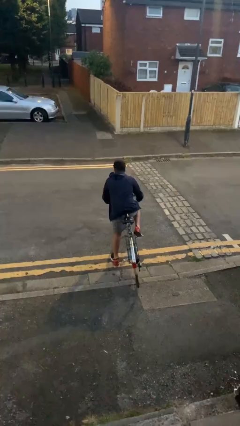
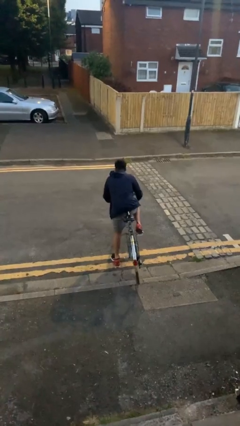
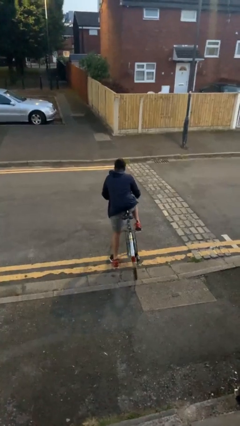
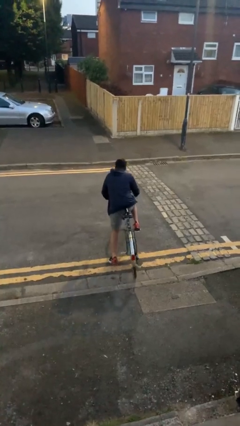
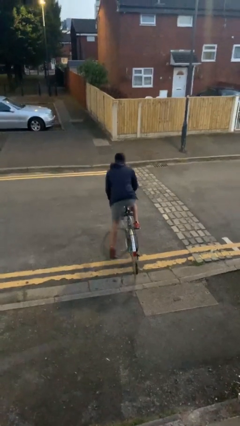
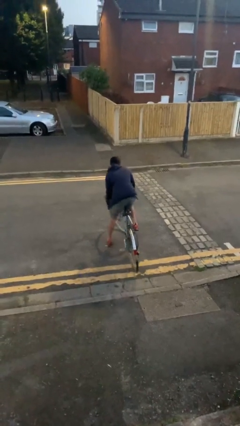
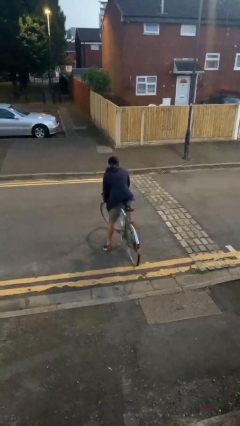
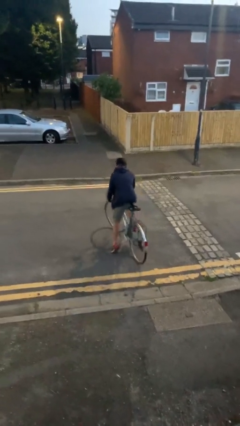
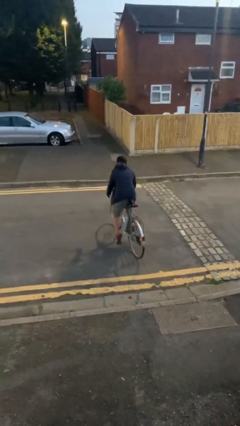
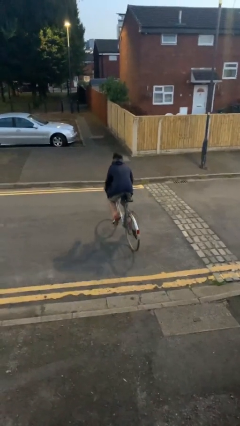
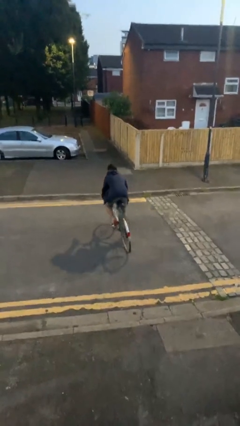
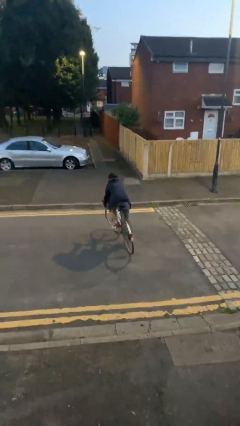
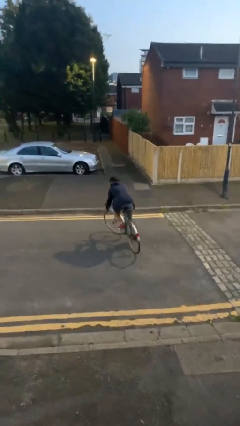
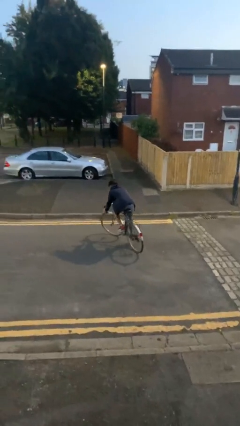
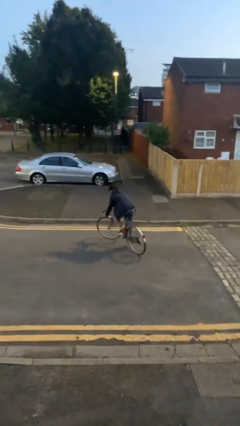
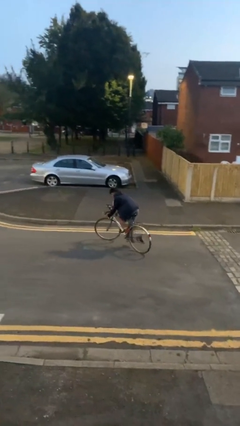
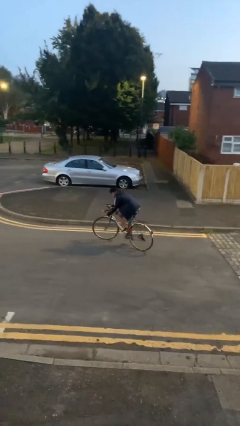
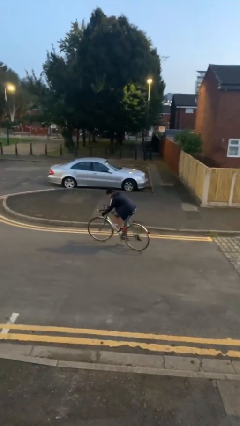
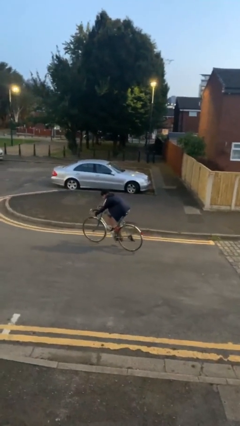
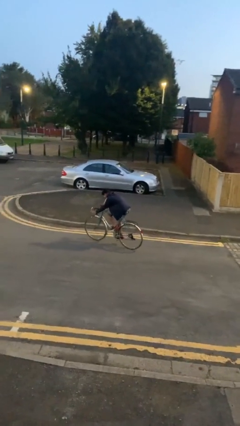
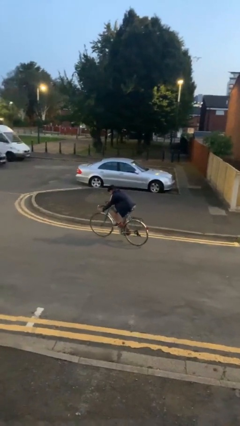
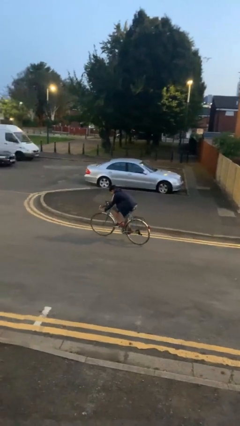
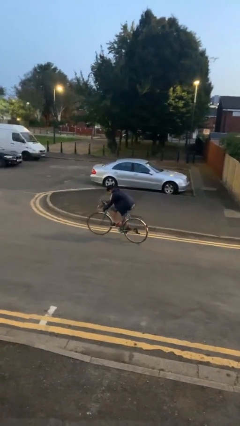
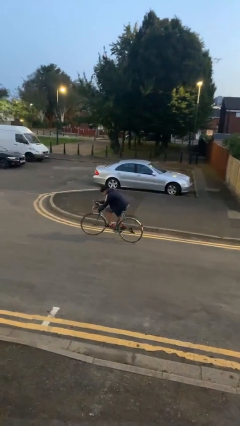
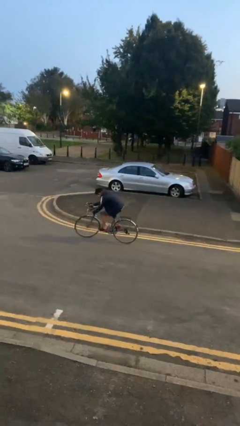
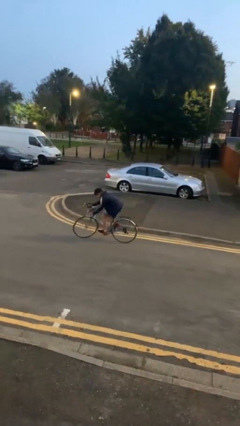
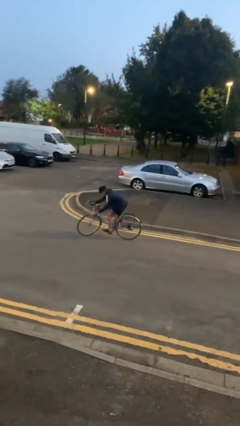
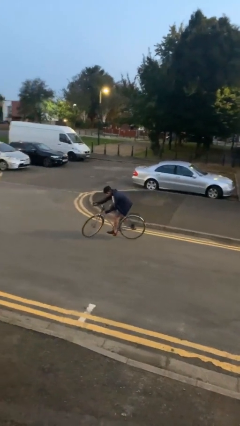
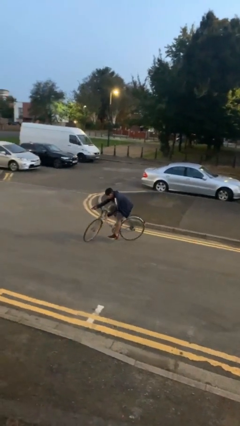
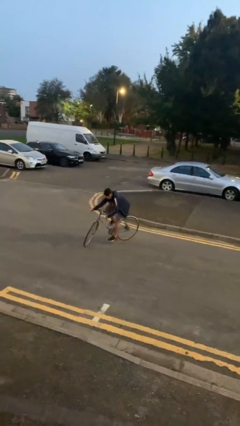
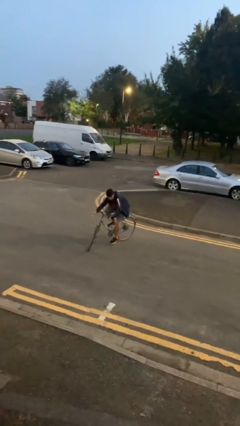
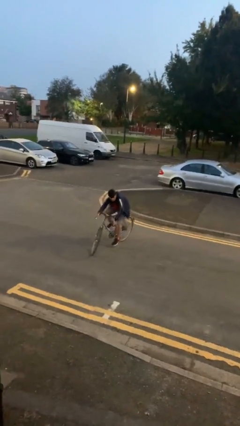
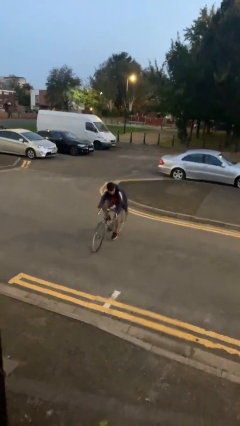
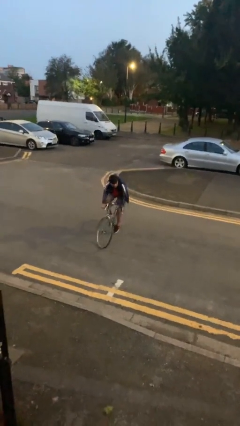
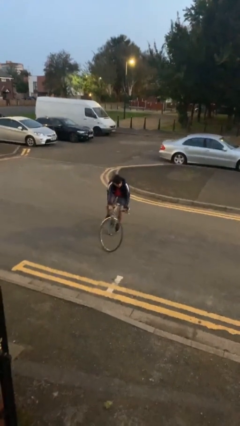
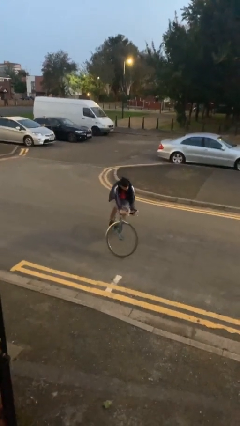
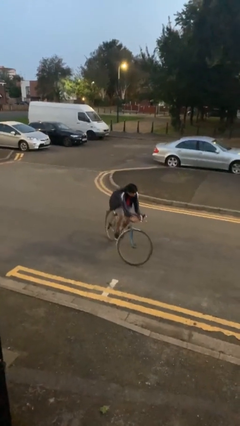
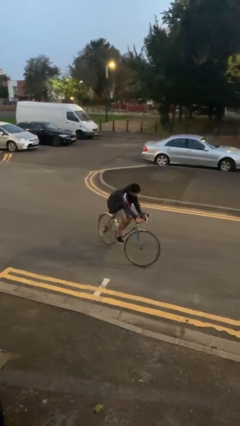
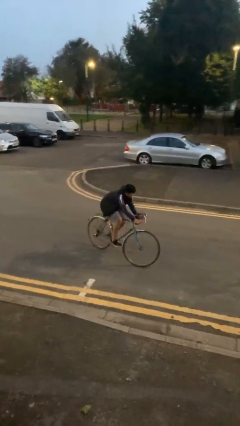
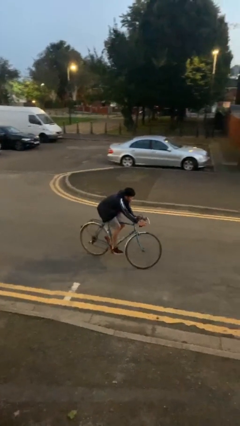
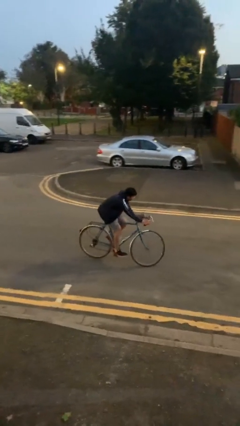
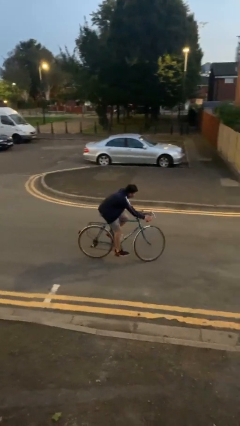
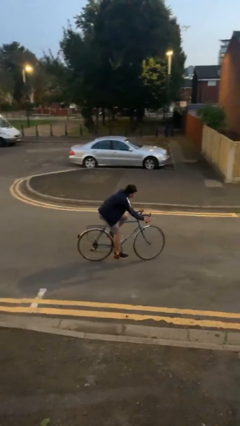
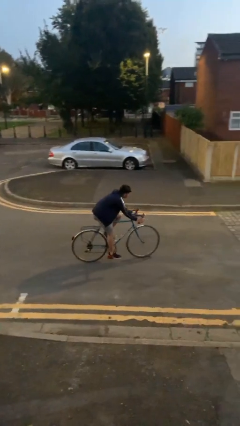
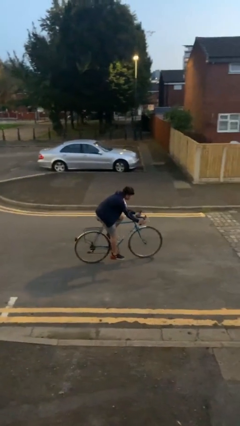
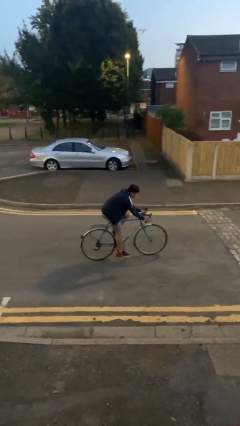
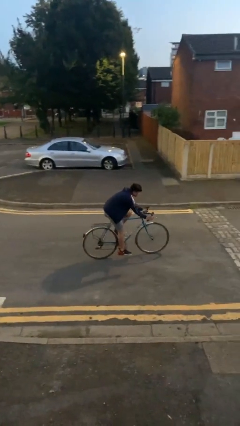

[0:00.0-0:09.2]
person rides bicycle

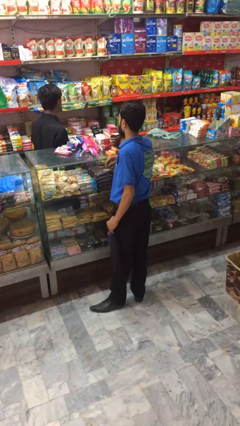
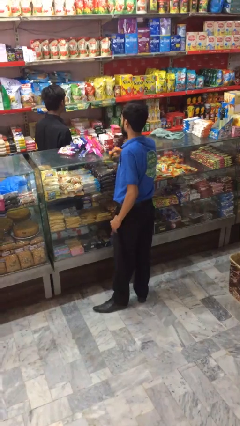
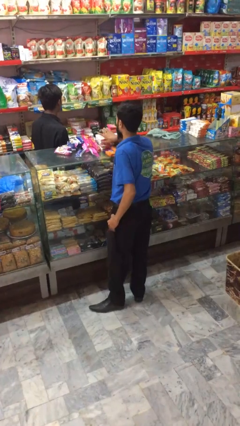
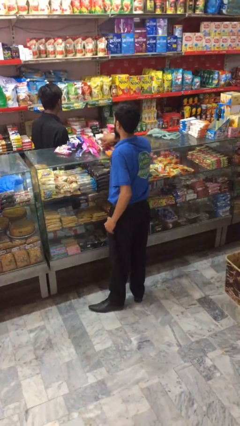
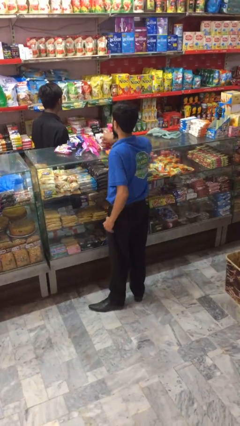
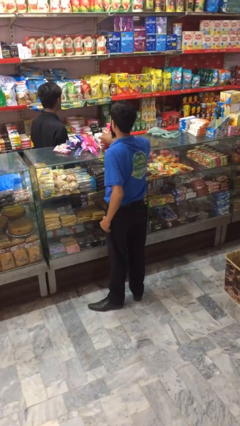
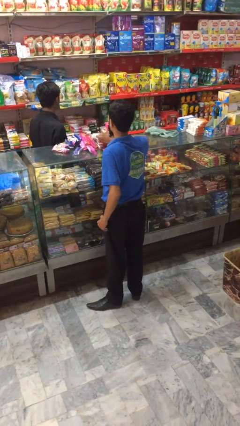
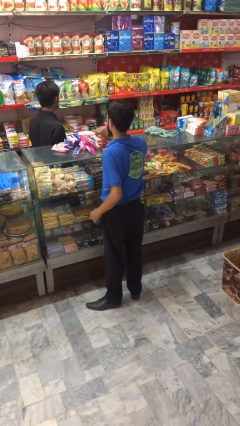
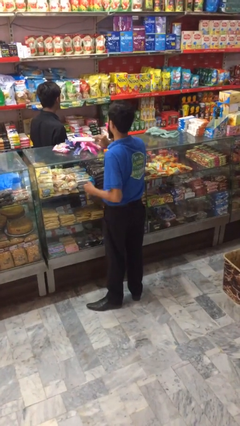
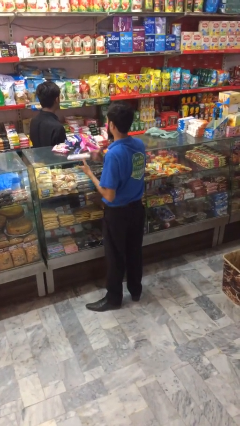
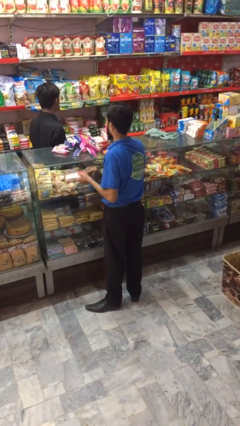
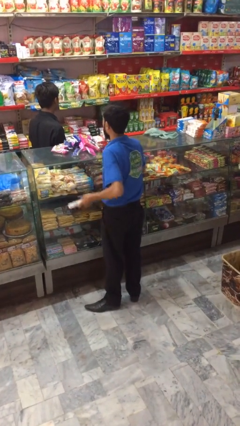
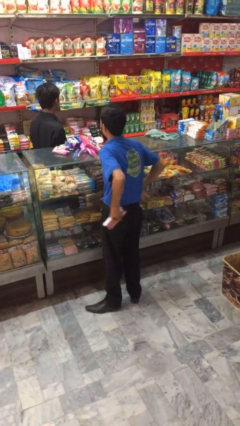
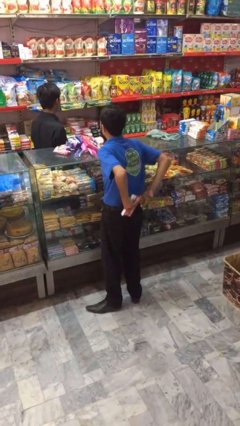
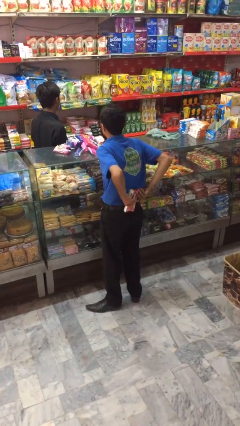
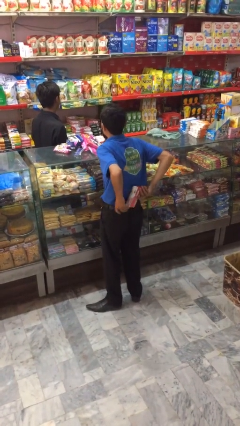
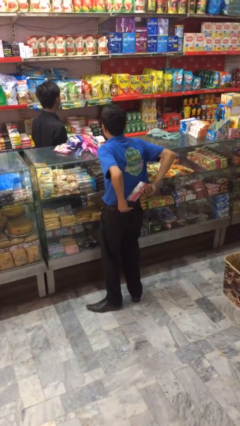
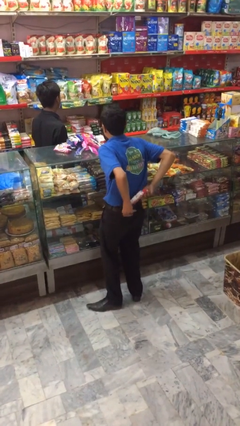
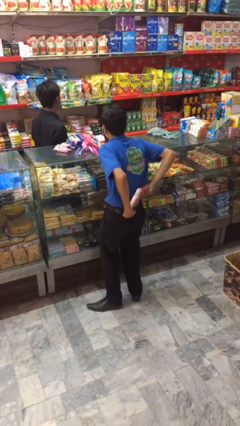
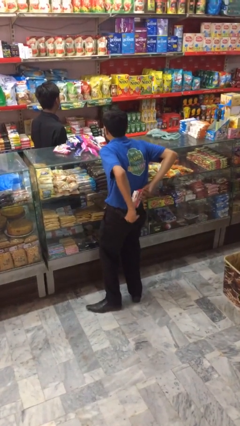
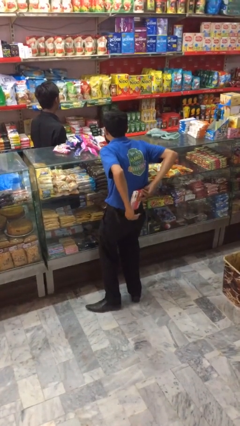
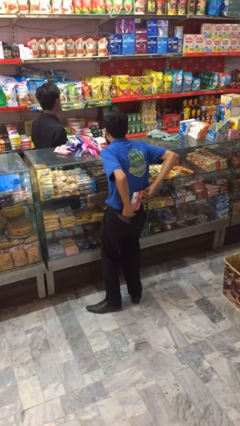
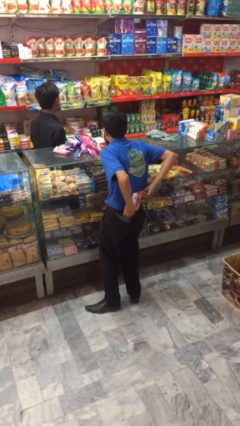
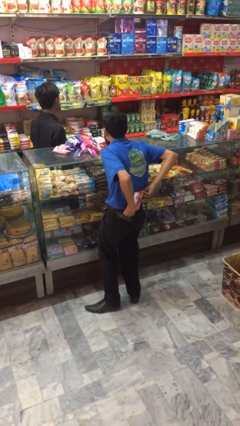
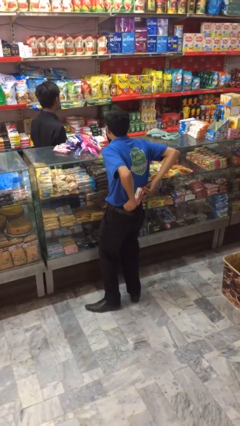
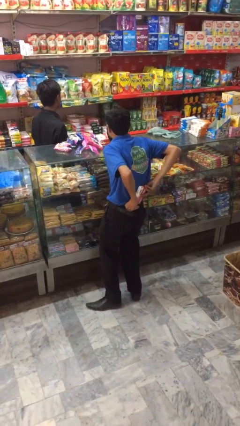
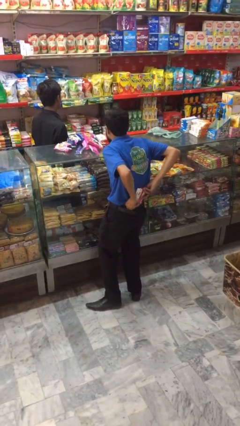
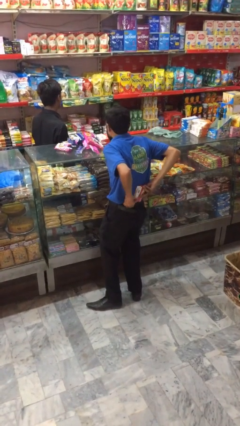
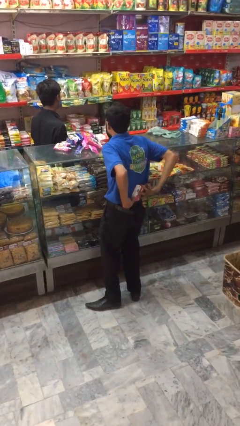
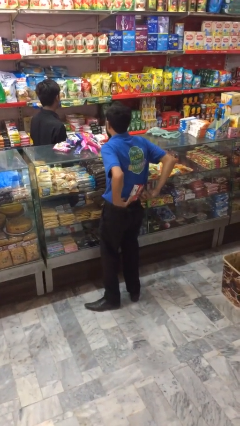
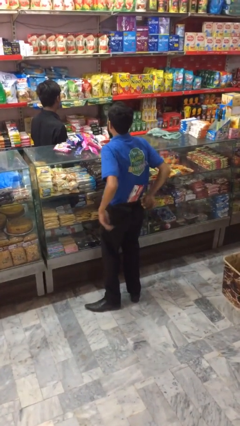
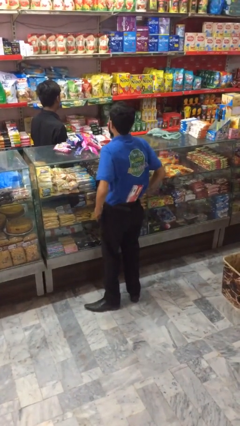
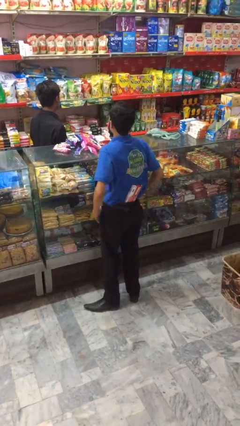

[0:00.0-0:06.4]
person steals object from person

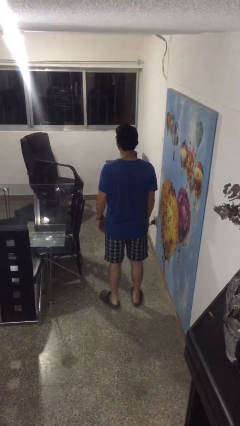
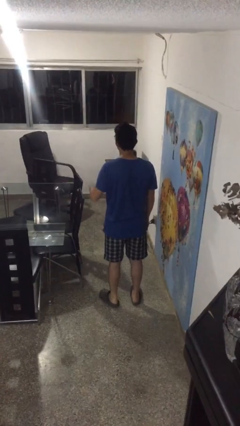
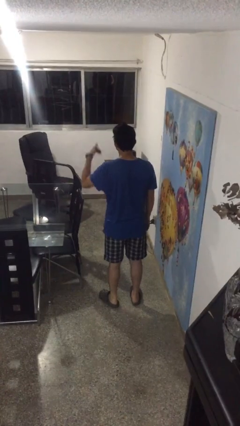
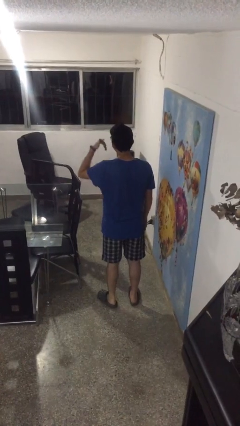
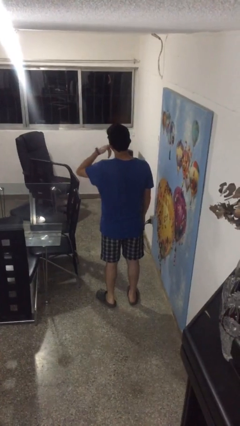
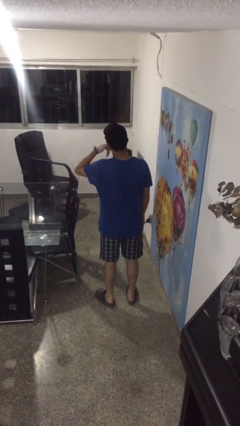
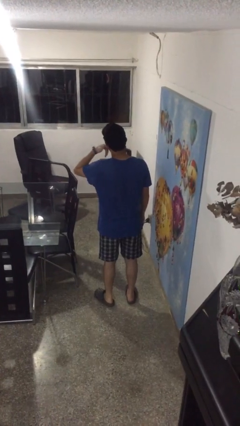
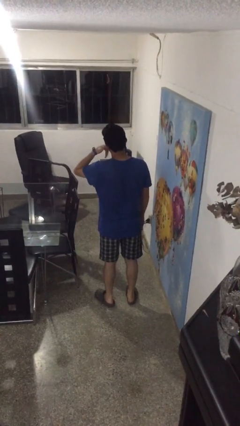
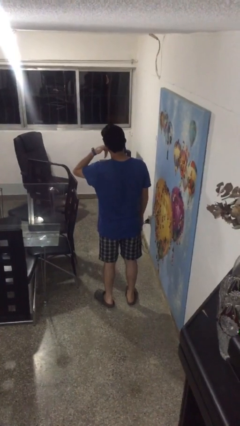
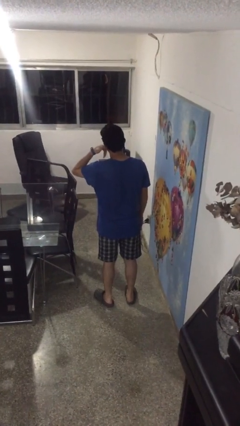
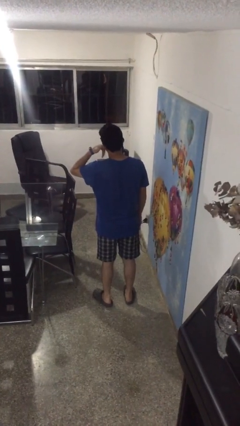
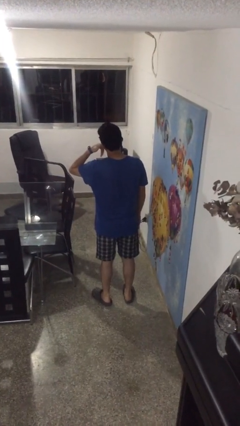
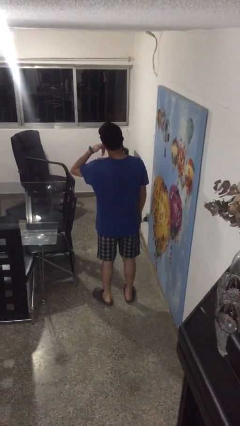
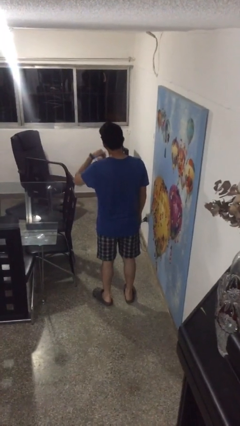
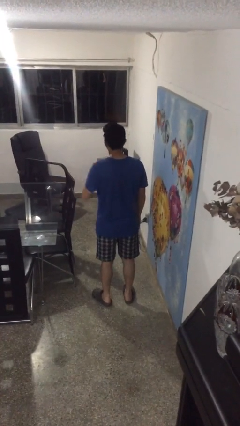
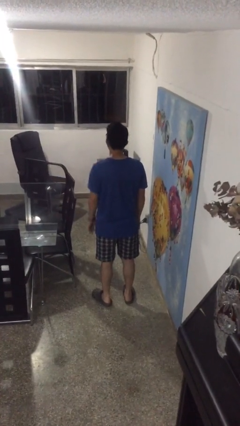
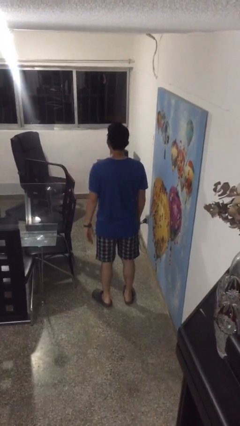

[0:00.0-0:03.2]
person gestures call me
